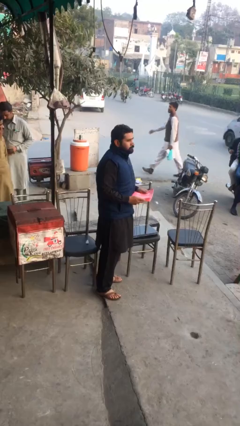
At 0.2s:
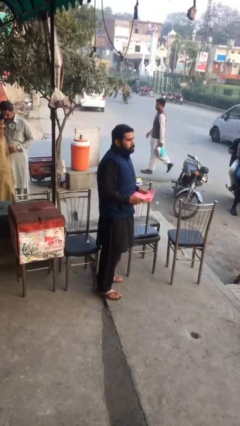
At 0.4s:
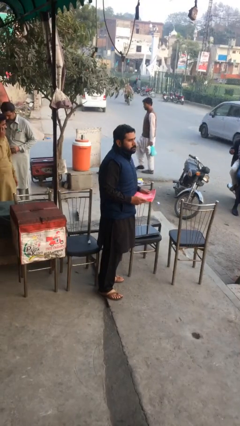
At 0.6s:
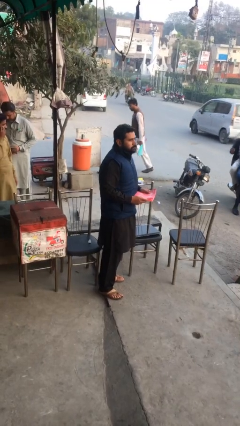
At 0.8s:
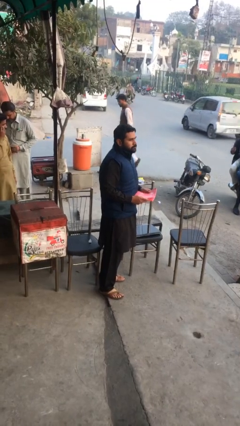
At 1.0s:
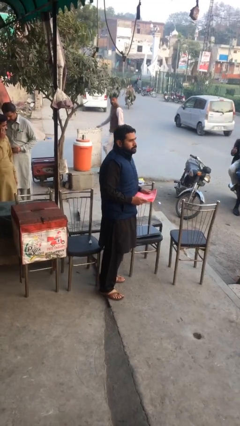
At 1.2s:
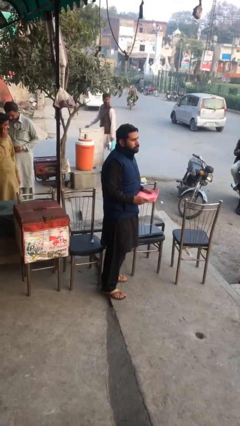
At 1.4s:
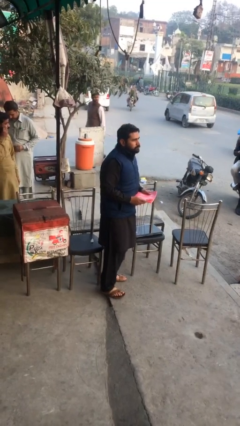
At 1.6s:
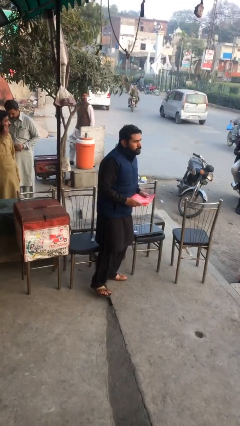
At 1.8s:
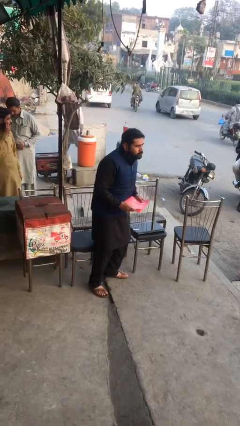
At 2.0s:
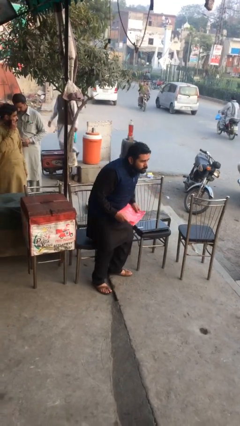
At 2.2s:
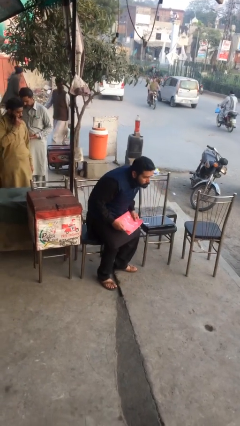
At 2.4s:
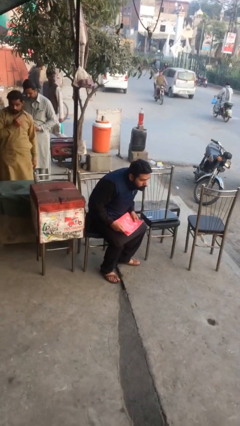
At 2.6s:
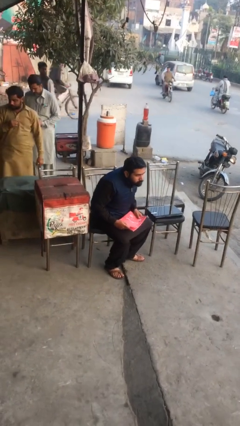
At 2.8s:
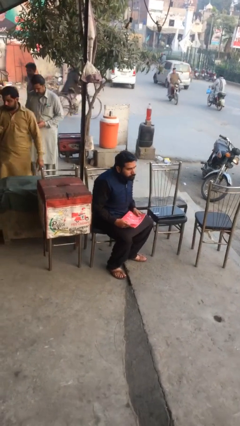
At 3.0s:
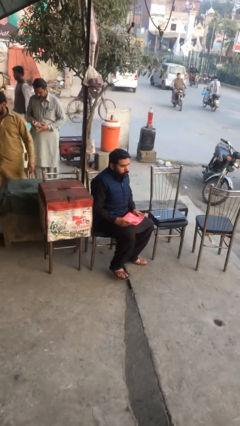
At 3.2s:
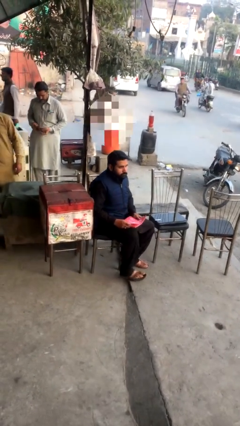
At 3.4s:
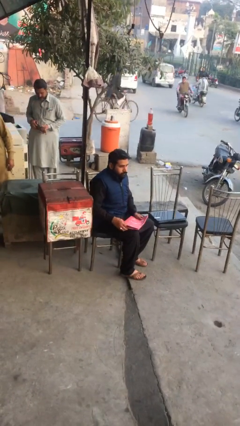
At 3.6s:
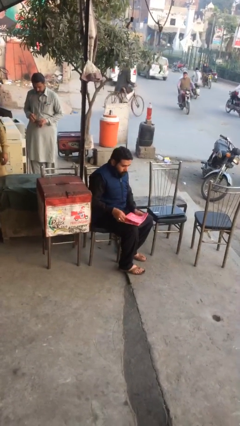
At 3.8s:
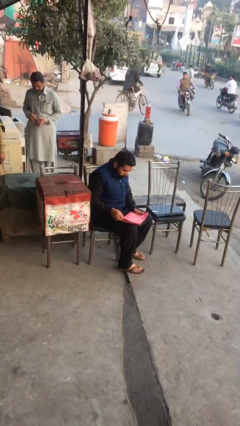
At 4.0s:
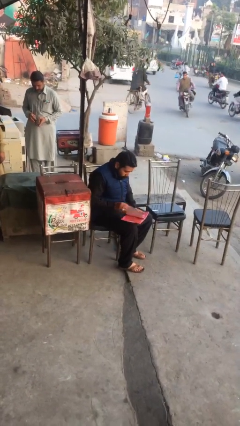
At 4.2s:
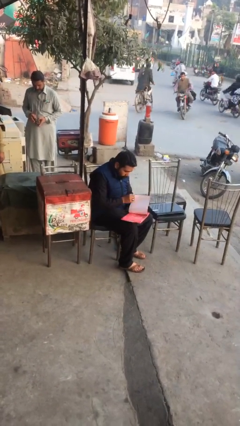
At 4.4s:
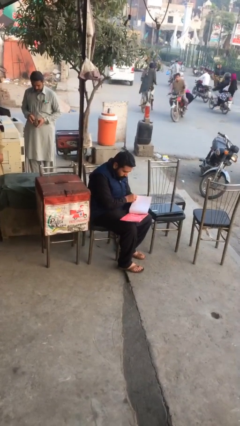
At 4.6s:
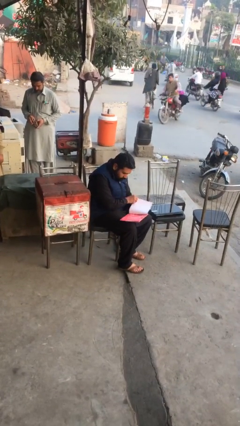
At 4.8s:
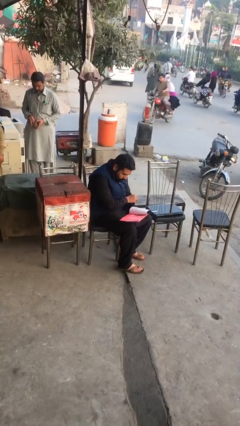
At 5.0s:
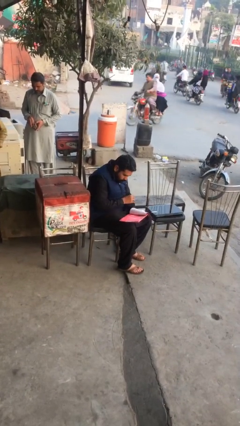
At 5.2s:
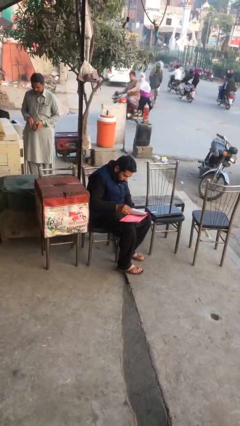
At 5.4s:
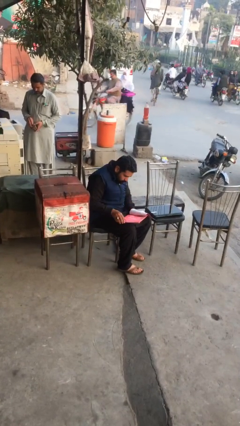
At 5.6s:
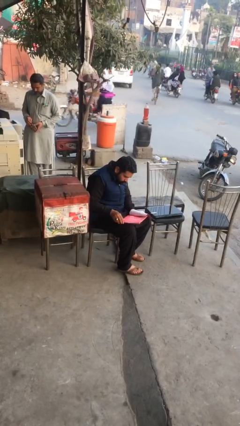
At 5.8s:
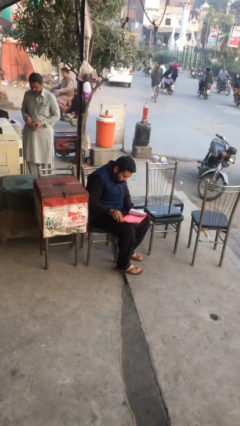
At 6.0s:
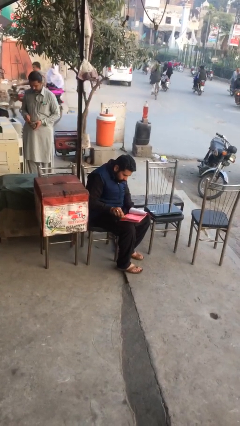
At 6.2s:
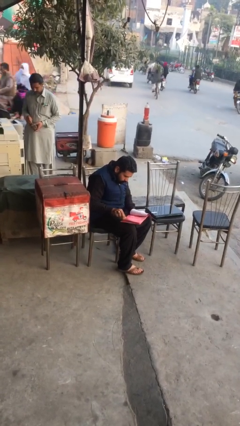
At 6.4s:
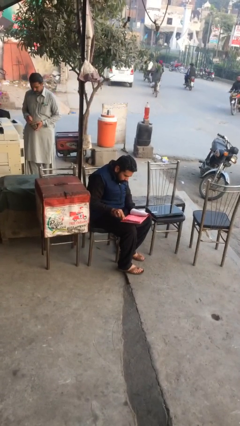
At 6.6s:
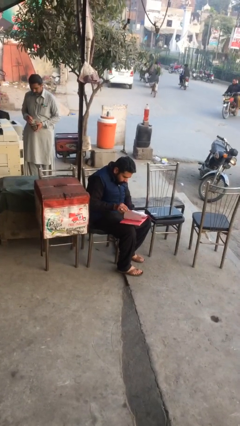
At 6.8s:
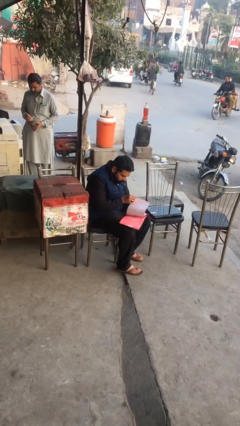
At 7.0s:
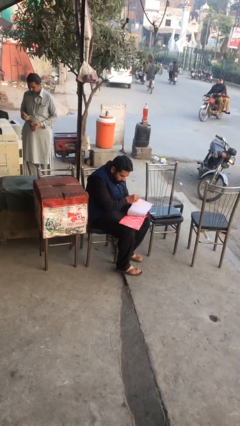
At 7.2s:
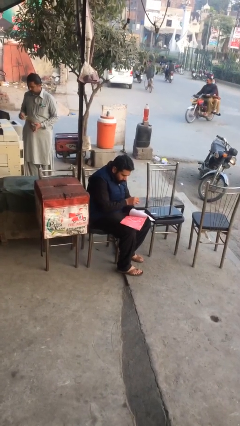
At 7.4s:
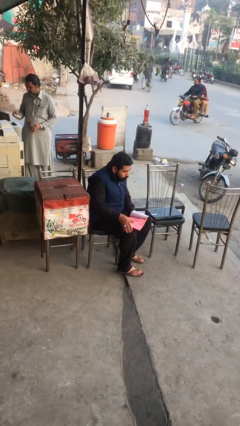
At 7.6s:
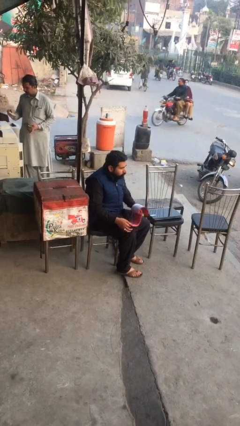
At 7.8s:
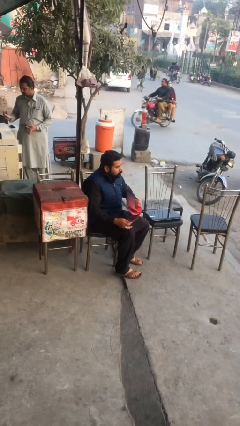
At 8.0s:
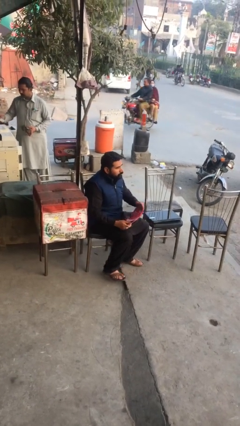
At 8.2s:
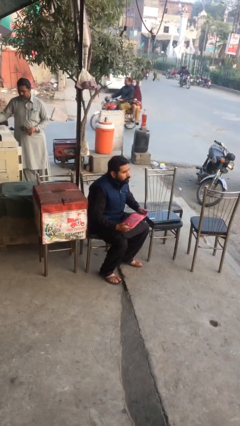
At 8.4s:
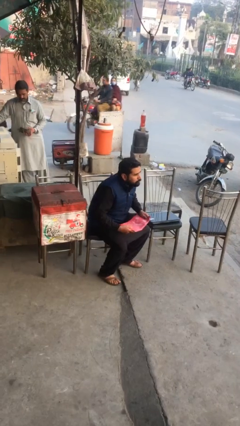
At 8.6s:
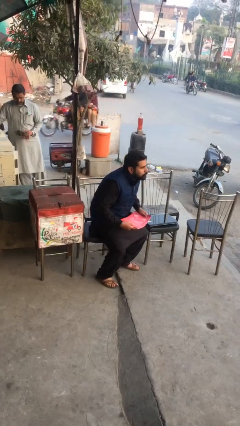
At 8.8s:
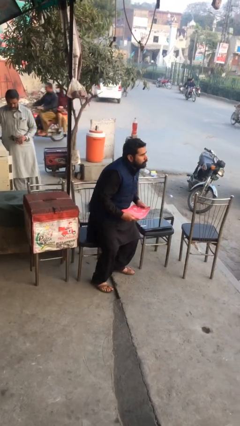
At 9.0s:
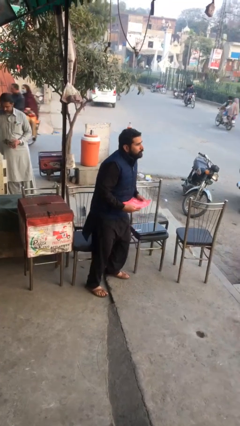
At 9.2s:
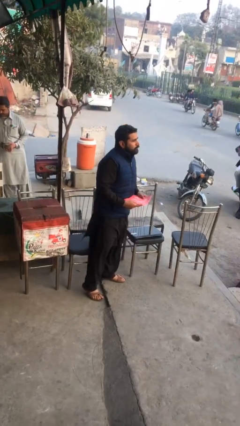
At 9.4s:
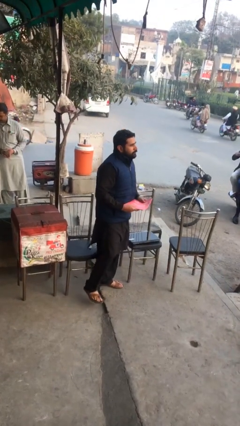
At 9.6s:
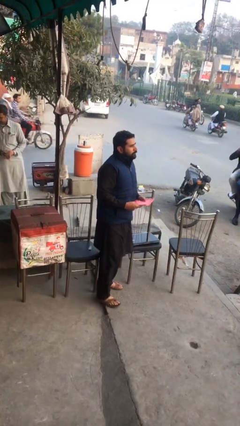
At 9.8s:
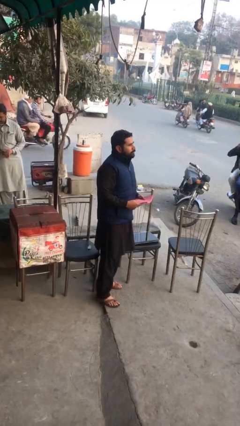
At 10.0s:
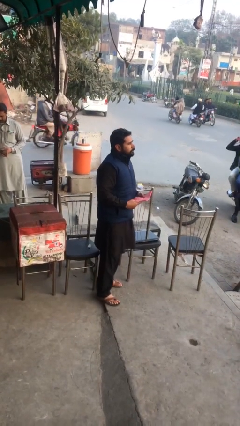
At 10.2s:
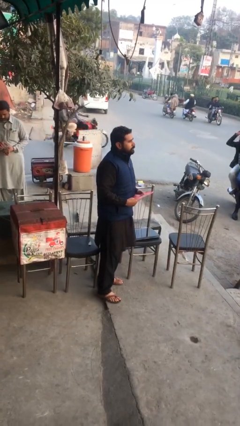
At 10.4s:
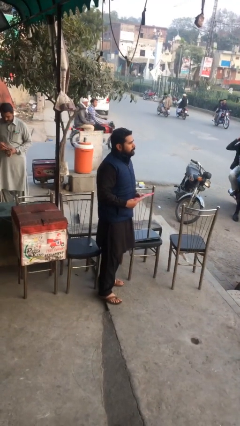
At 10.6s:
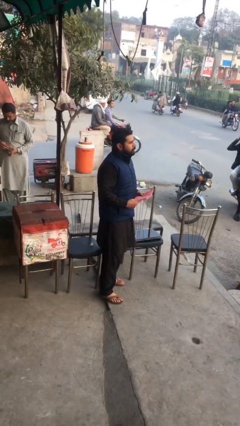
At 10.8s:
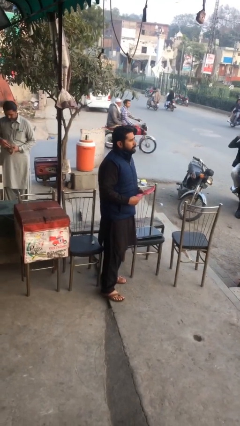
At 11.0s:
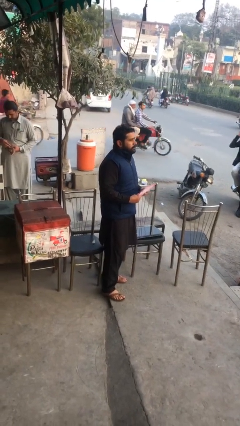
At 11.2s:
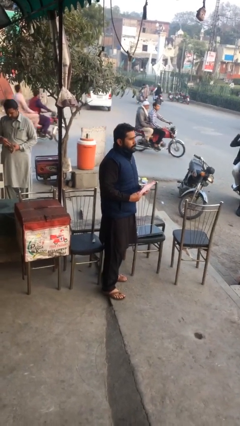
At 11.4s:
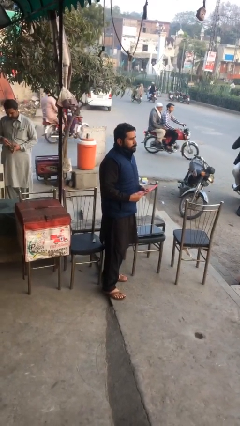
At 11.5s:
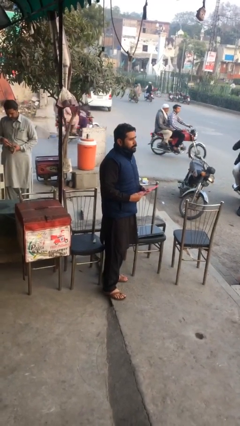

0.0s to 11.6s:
person reads document

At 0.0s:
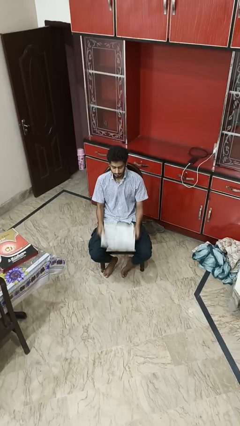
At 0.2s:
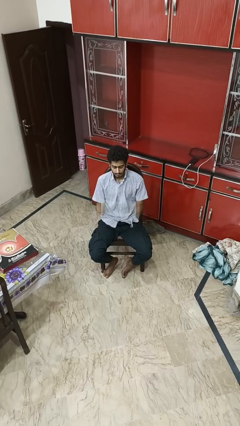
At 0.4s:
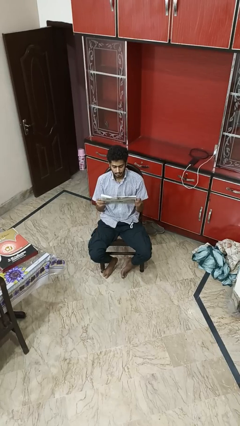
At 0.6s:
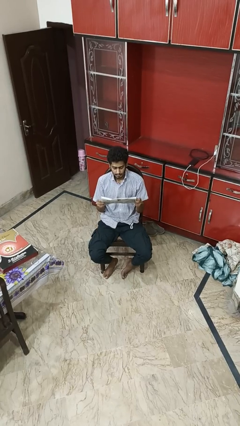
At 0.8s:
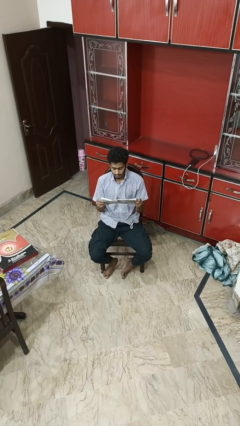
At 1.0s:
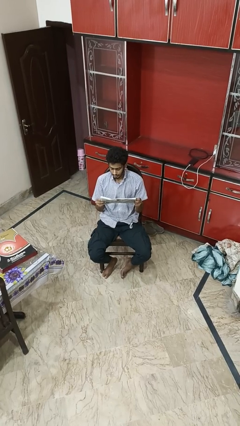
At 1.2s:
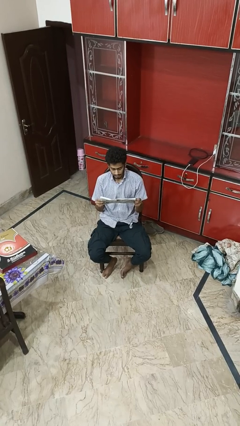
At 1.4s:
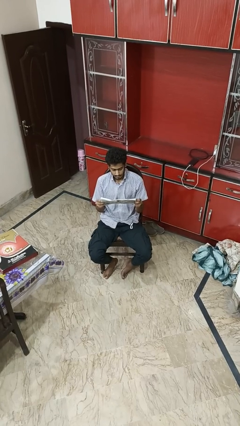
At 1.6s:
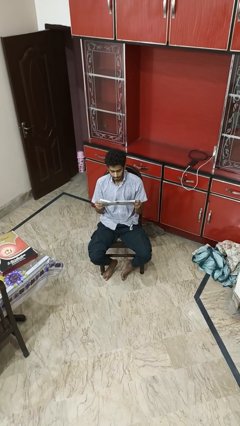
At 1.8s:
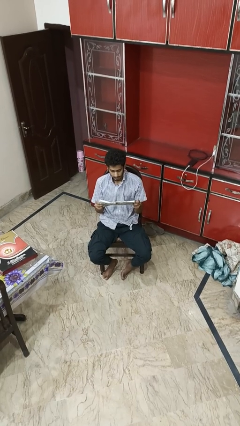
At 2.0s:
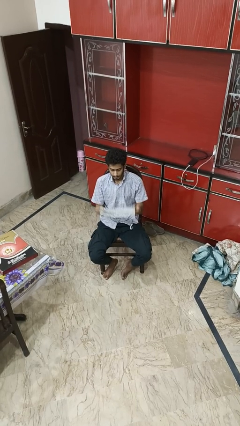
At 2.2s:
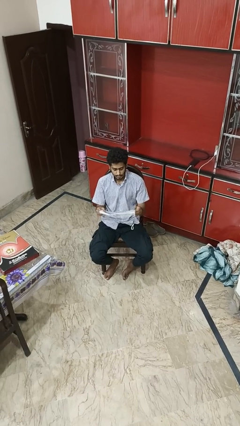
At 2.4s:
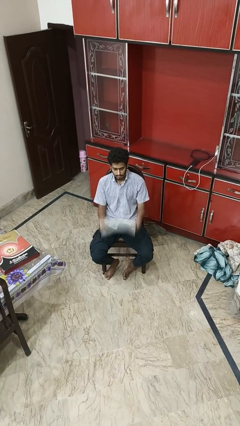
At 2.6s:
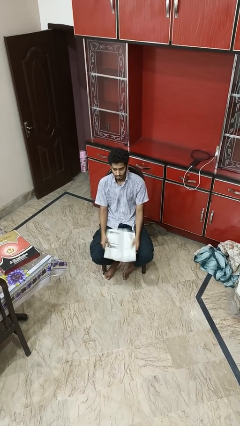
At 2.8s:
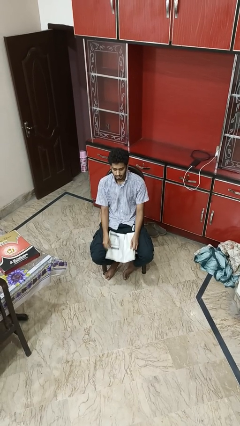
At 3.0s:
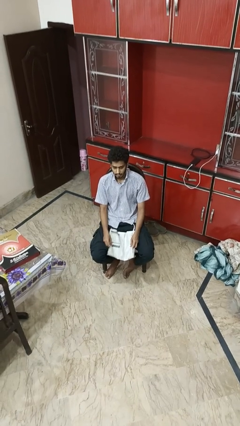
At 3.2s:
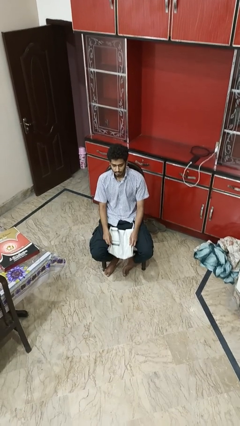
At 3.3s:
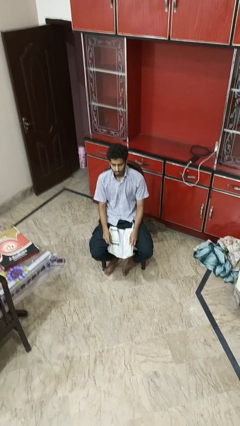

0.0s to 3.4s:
person reads newspaper

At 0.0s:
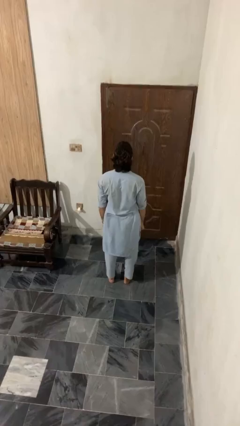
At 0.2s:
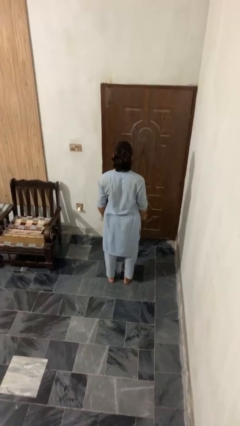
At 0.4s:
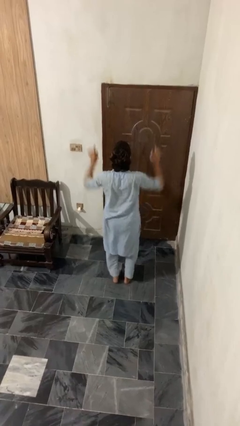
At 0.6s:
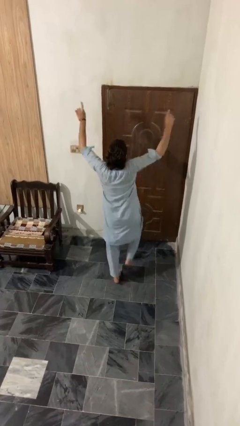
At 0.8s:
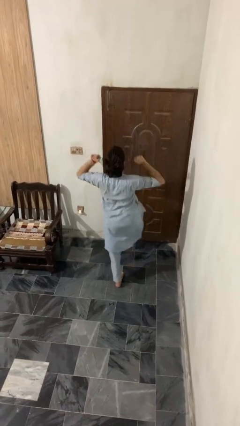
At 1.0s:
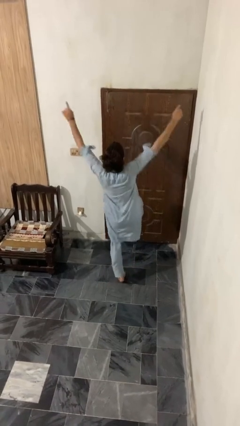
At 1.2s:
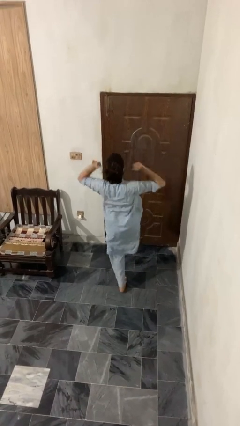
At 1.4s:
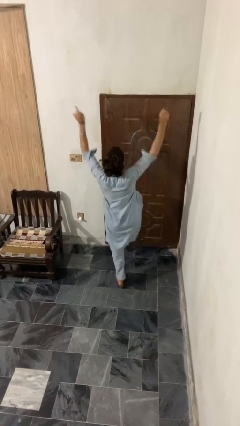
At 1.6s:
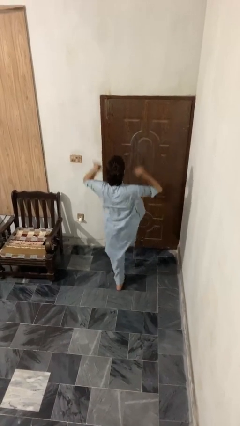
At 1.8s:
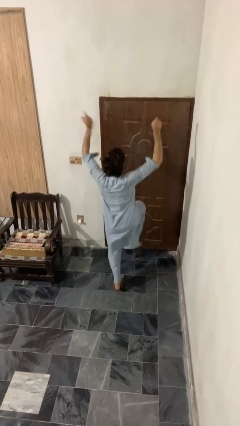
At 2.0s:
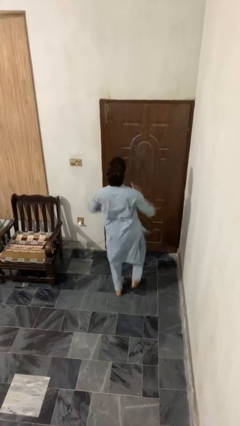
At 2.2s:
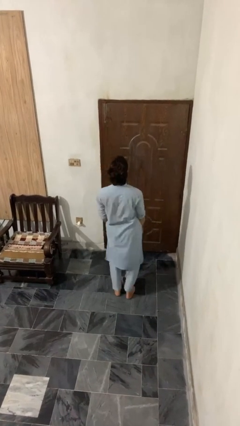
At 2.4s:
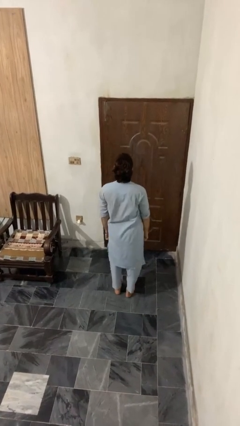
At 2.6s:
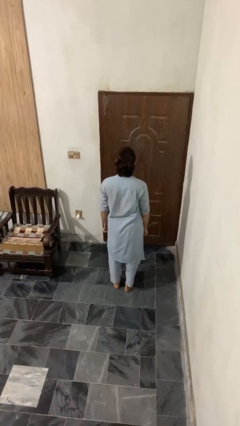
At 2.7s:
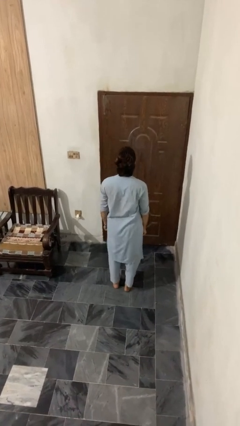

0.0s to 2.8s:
person dances in place

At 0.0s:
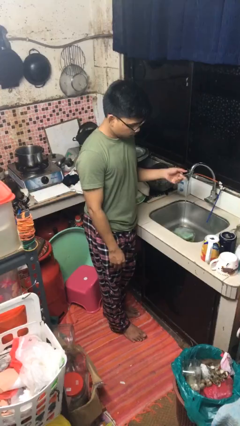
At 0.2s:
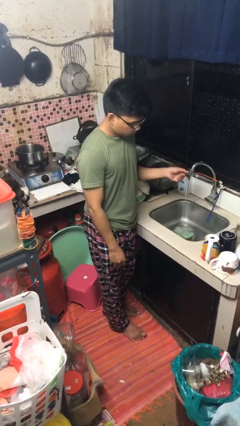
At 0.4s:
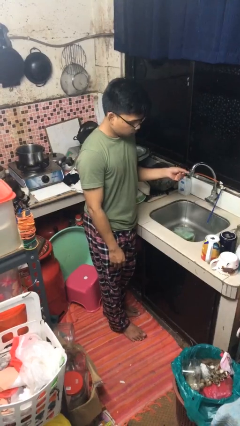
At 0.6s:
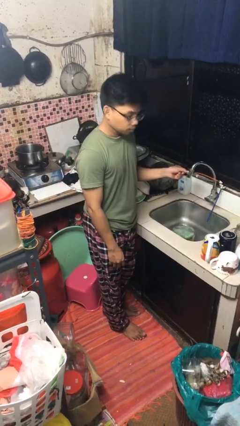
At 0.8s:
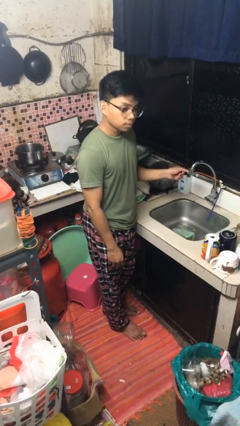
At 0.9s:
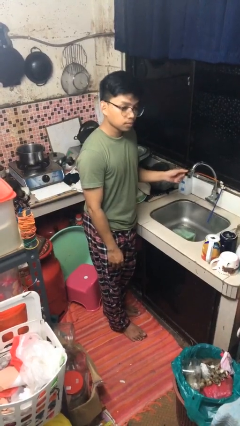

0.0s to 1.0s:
person turns off faucet
